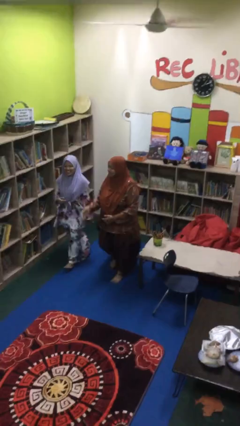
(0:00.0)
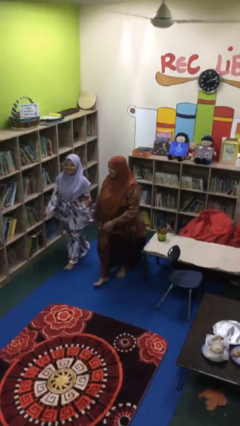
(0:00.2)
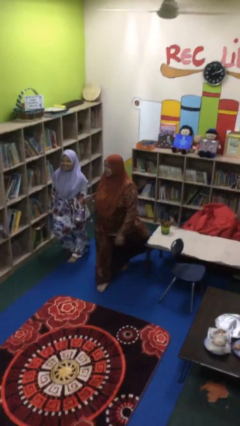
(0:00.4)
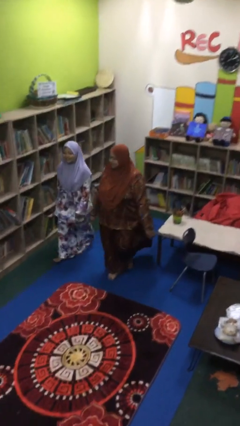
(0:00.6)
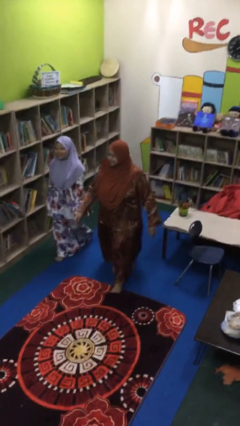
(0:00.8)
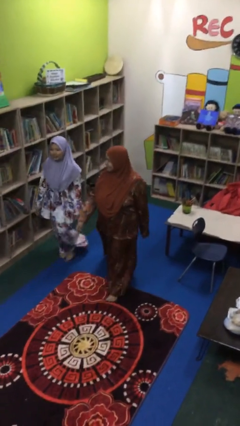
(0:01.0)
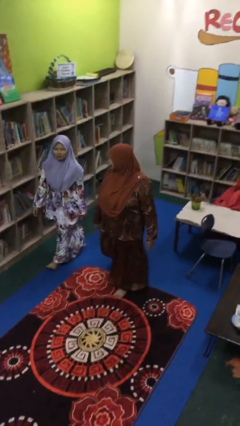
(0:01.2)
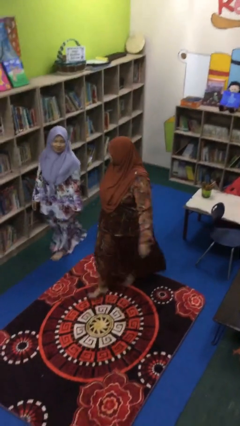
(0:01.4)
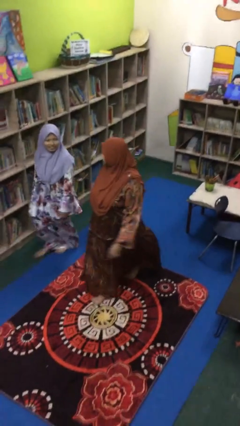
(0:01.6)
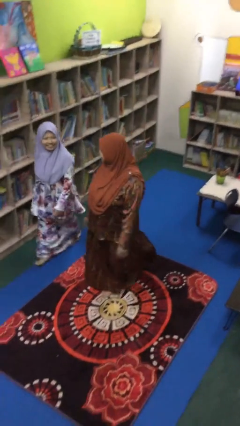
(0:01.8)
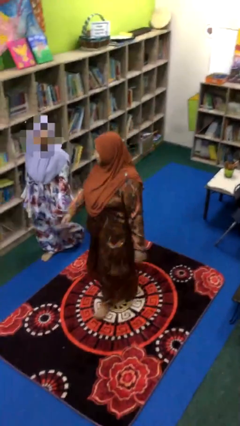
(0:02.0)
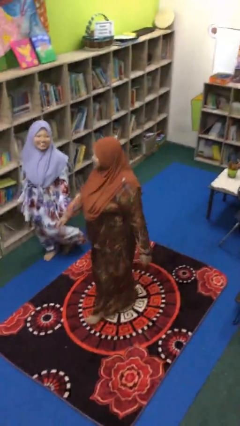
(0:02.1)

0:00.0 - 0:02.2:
person talks to person

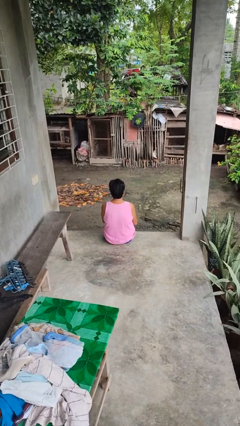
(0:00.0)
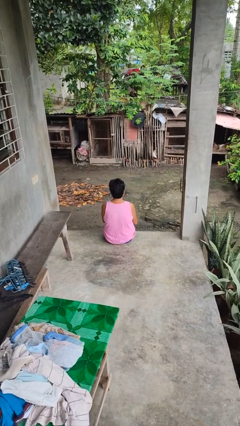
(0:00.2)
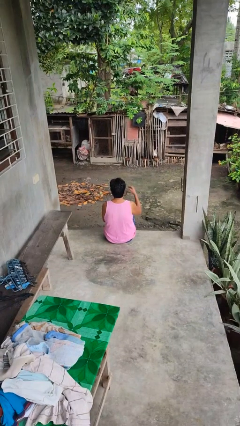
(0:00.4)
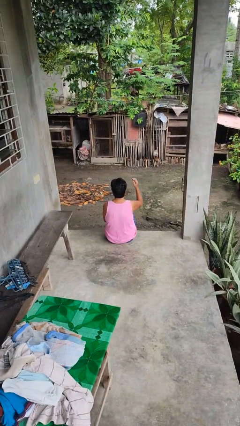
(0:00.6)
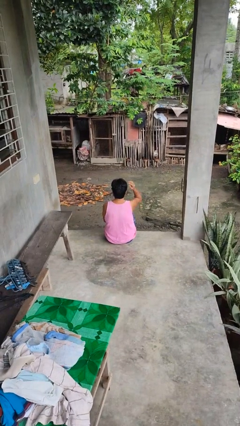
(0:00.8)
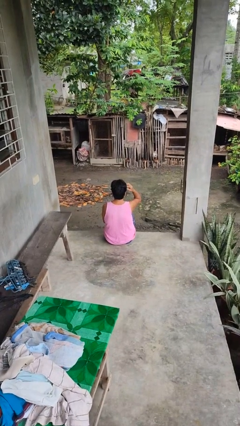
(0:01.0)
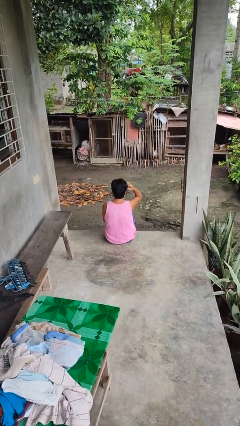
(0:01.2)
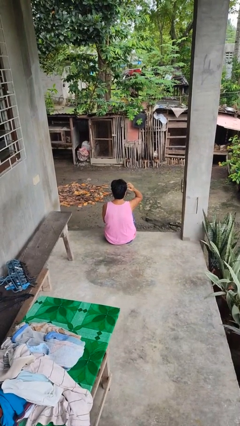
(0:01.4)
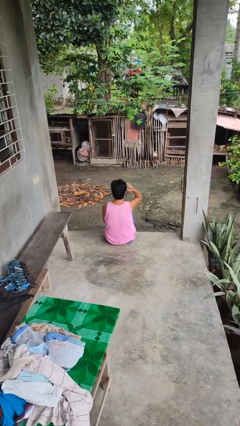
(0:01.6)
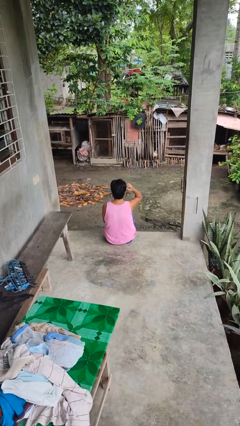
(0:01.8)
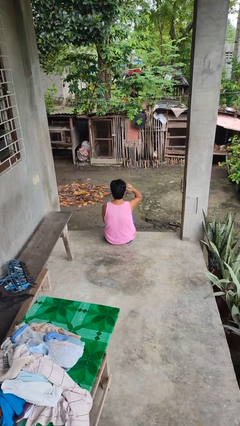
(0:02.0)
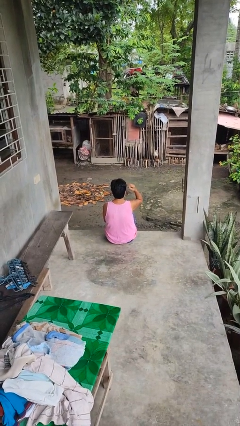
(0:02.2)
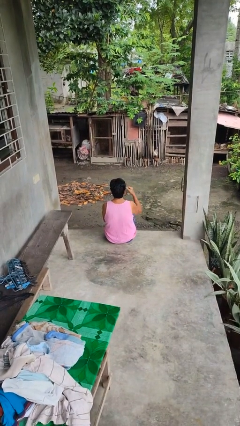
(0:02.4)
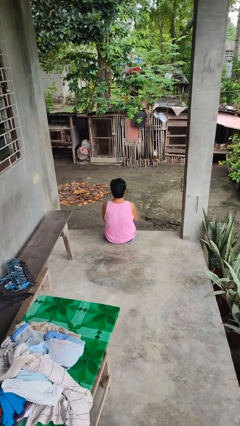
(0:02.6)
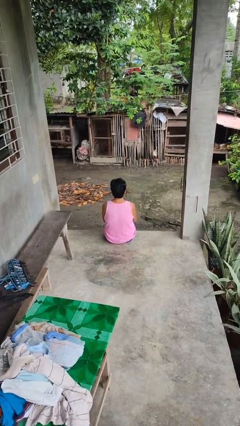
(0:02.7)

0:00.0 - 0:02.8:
person scratches face

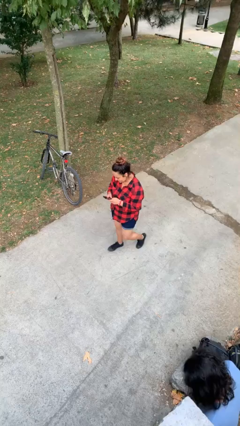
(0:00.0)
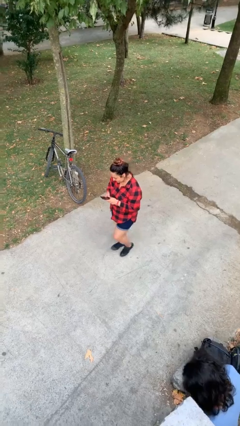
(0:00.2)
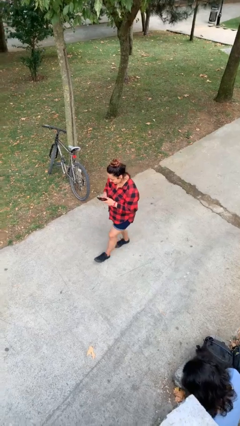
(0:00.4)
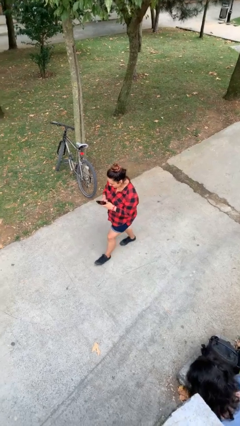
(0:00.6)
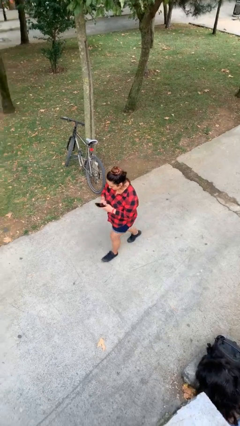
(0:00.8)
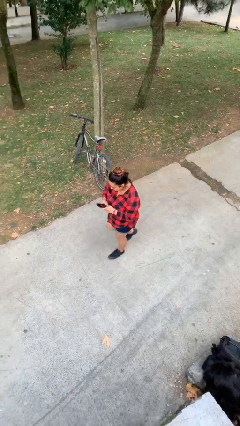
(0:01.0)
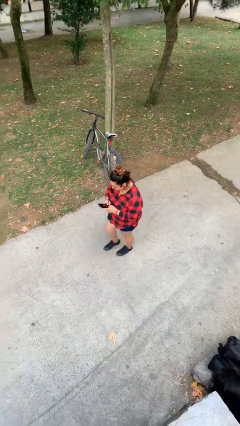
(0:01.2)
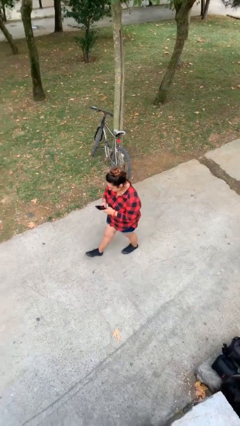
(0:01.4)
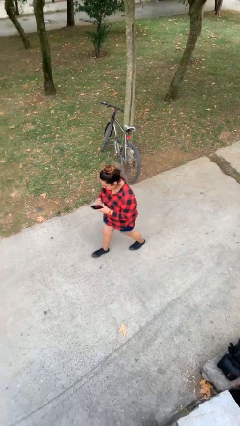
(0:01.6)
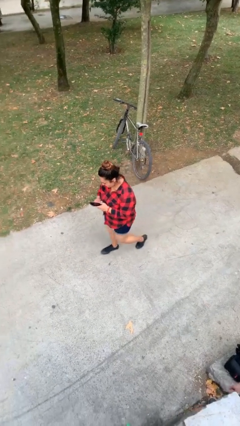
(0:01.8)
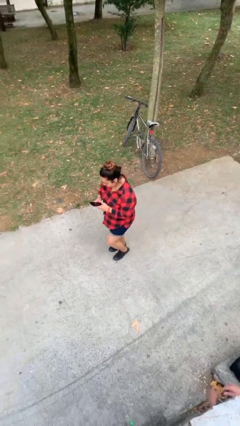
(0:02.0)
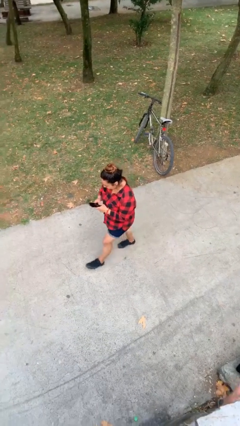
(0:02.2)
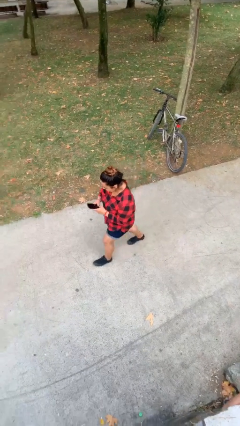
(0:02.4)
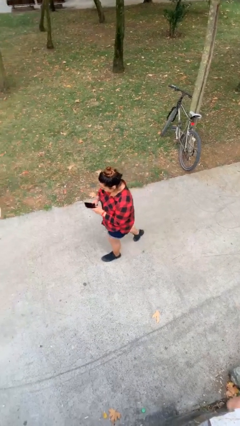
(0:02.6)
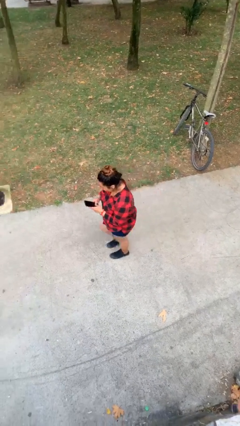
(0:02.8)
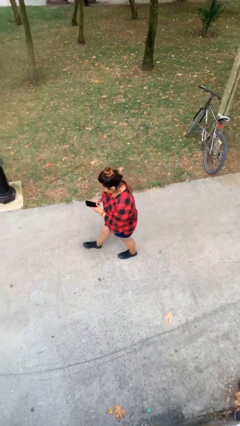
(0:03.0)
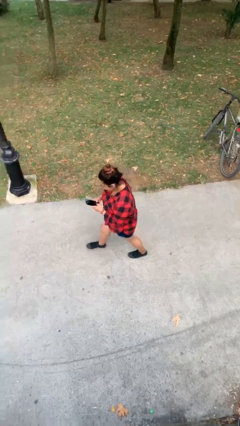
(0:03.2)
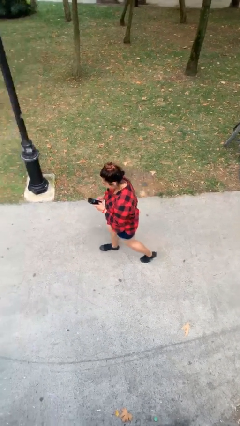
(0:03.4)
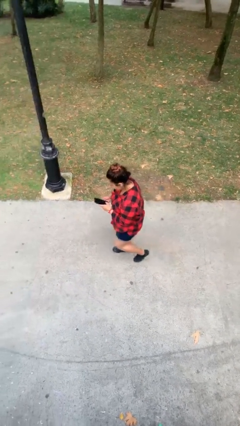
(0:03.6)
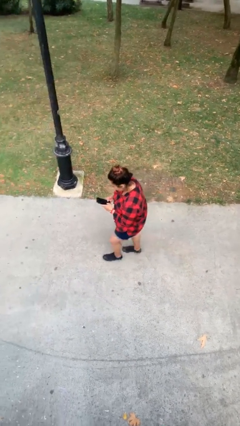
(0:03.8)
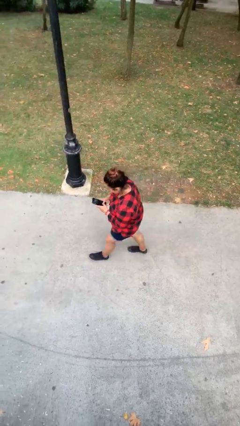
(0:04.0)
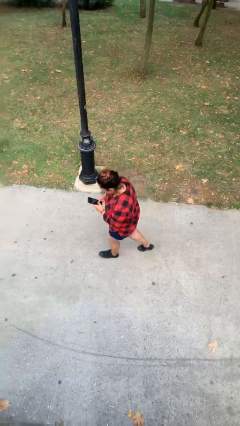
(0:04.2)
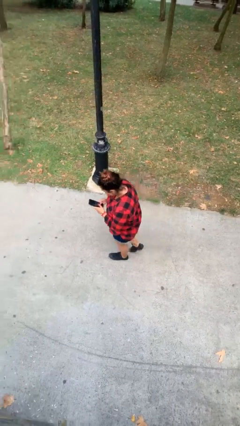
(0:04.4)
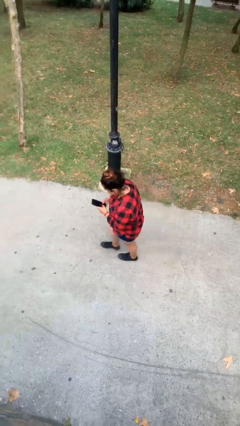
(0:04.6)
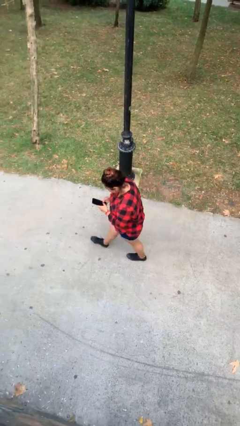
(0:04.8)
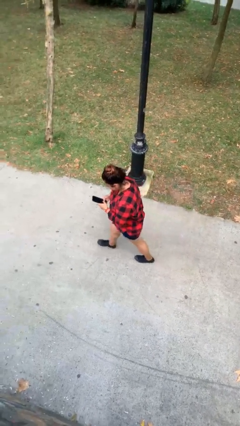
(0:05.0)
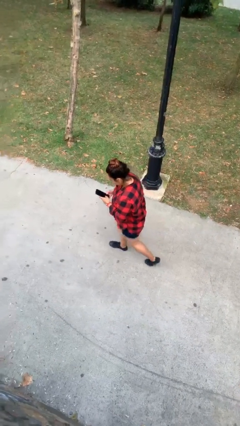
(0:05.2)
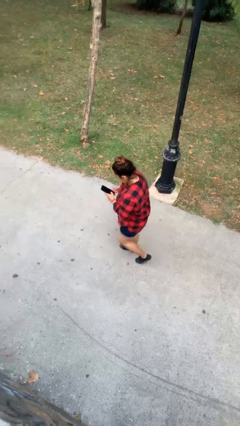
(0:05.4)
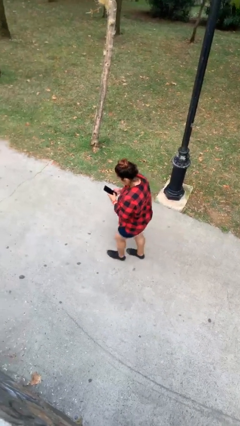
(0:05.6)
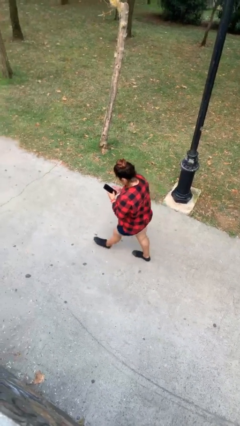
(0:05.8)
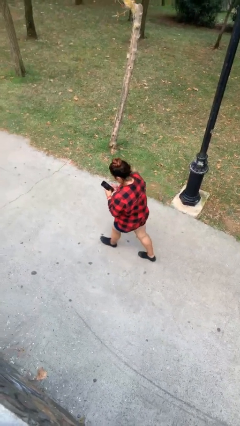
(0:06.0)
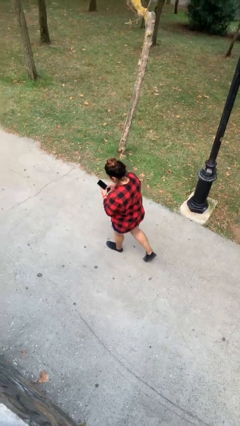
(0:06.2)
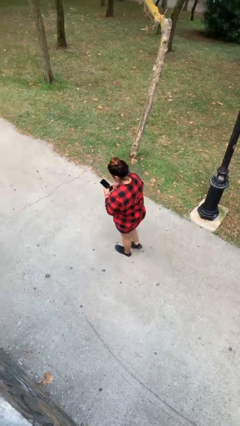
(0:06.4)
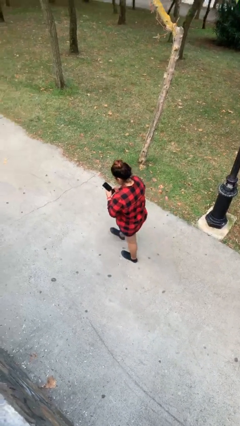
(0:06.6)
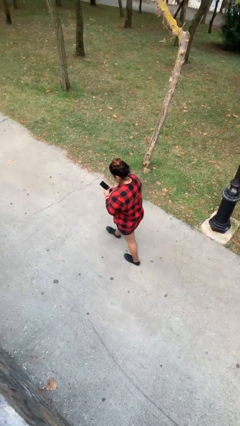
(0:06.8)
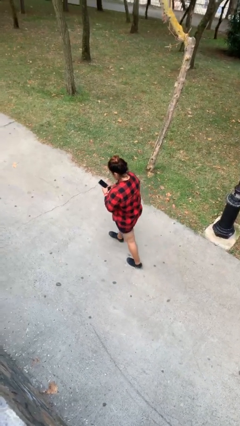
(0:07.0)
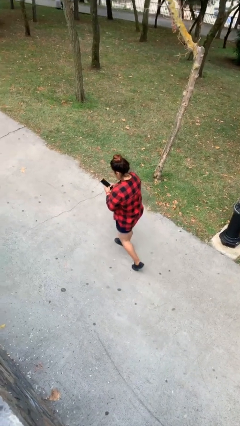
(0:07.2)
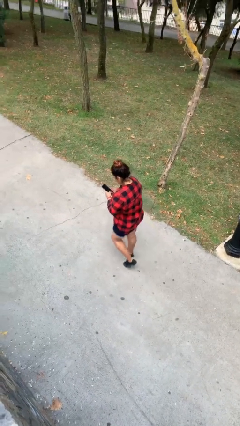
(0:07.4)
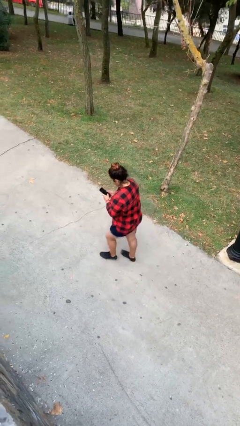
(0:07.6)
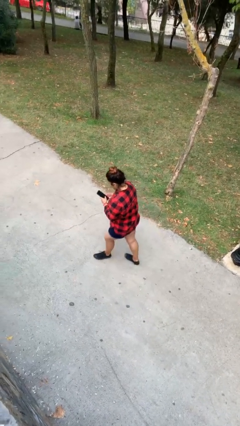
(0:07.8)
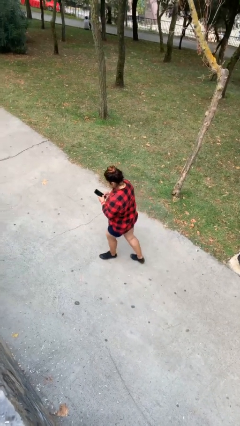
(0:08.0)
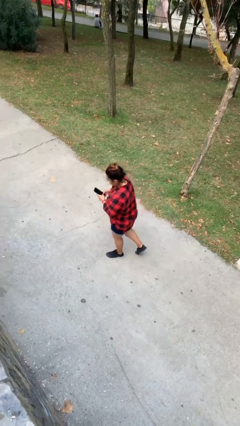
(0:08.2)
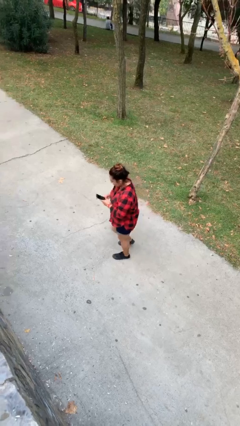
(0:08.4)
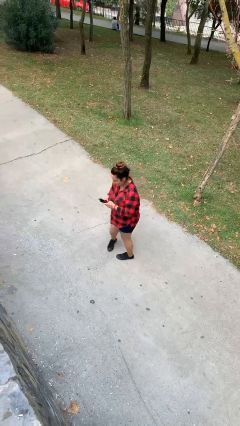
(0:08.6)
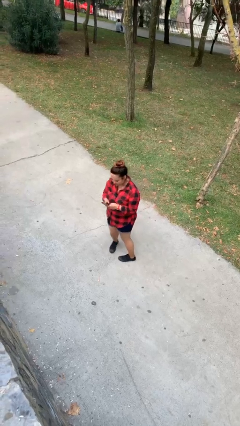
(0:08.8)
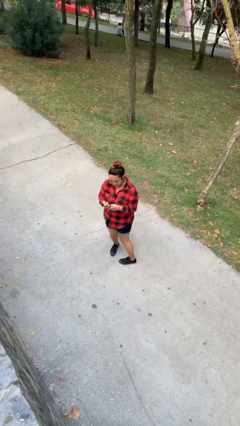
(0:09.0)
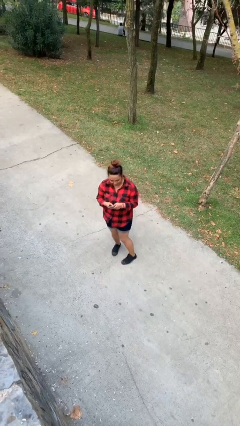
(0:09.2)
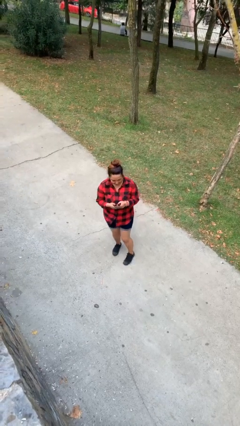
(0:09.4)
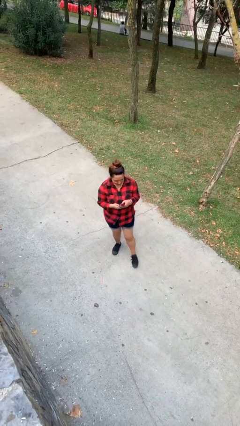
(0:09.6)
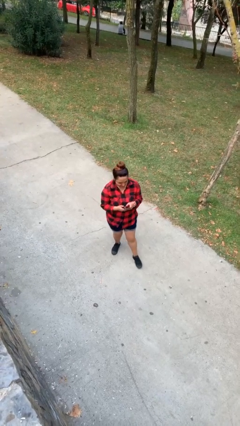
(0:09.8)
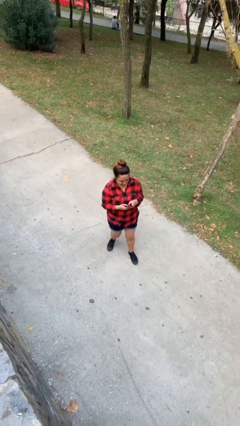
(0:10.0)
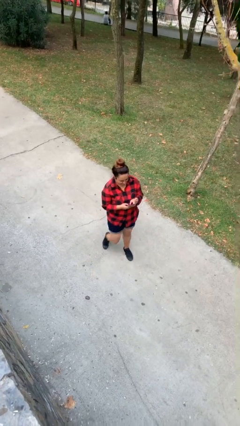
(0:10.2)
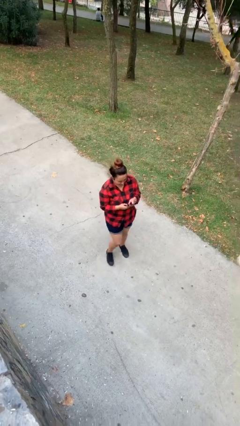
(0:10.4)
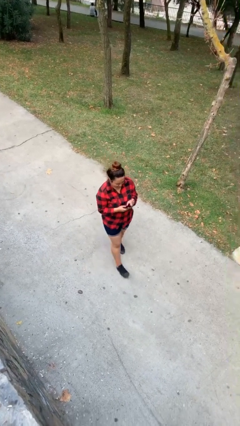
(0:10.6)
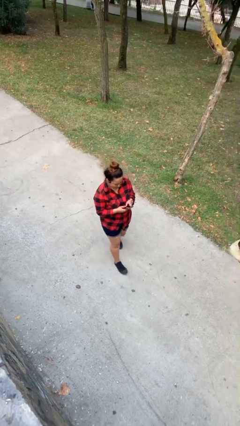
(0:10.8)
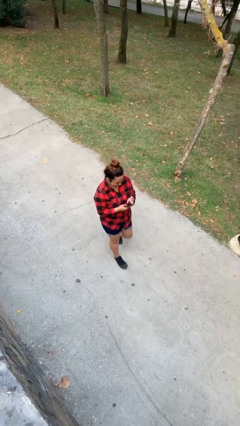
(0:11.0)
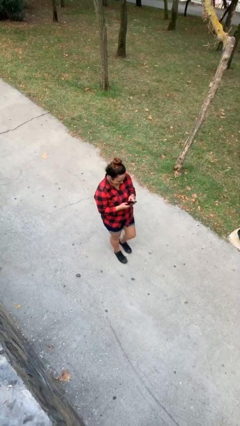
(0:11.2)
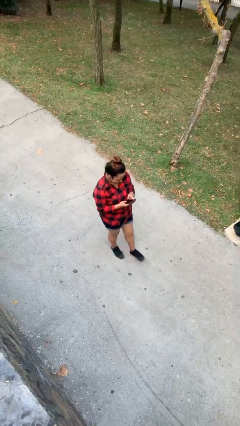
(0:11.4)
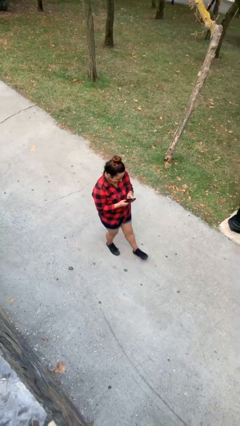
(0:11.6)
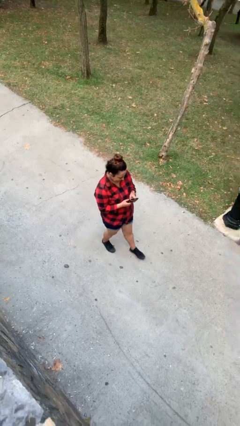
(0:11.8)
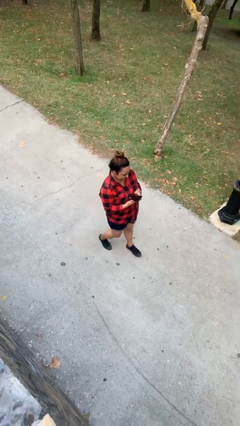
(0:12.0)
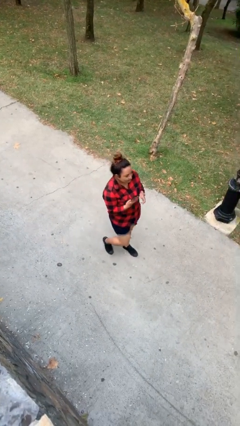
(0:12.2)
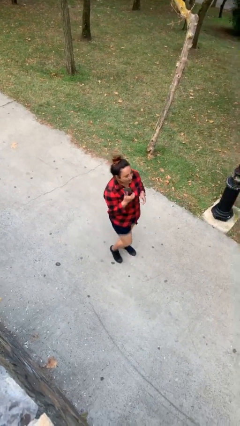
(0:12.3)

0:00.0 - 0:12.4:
person texts on phone

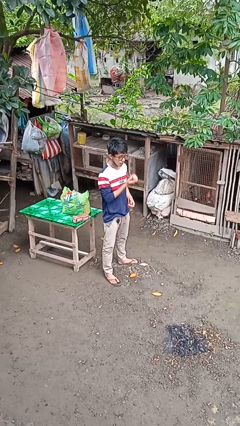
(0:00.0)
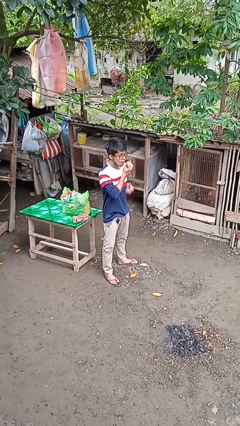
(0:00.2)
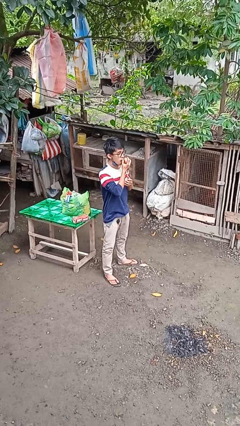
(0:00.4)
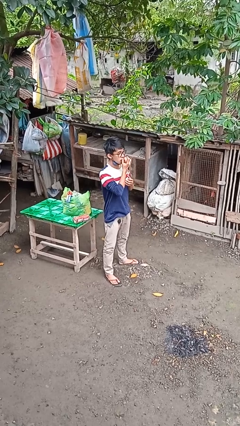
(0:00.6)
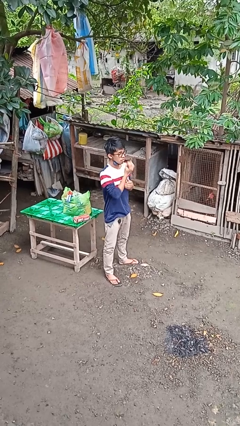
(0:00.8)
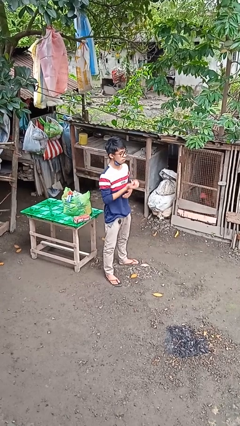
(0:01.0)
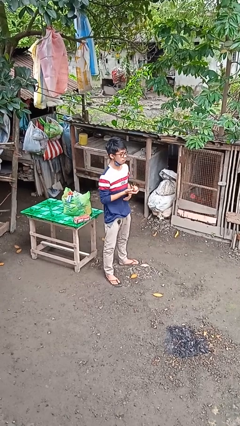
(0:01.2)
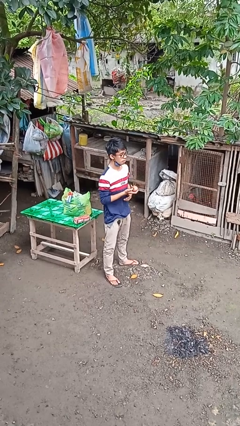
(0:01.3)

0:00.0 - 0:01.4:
person eats apple
